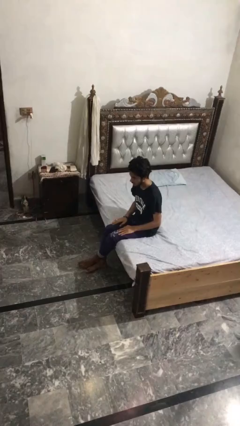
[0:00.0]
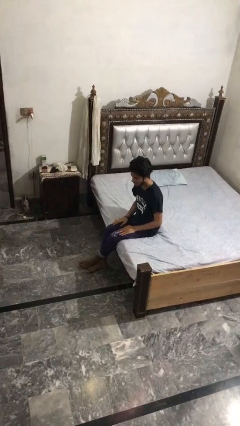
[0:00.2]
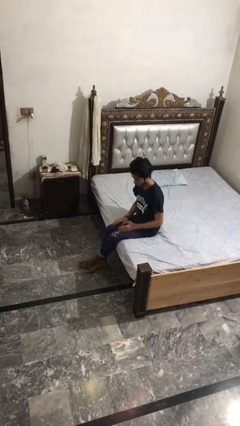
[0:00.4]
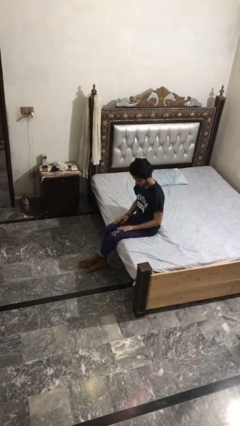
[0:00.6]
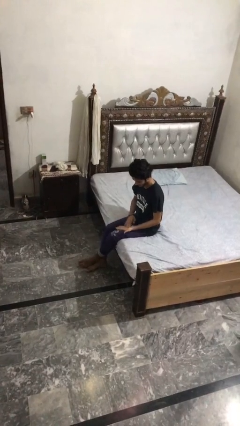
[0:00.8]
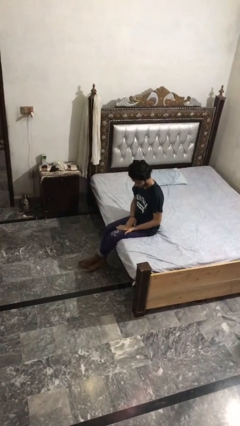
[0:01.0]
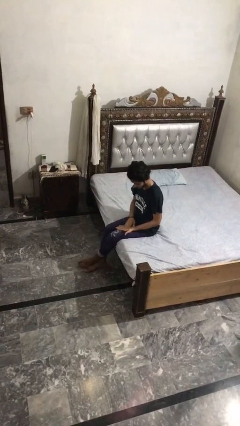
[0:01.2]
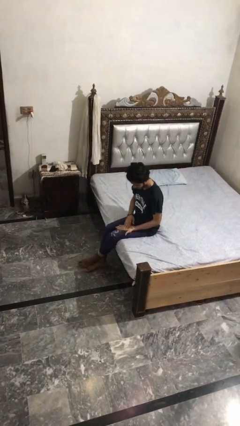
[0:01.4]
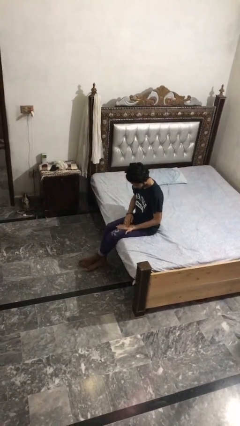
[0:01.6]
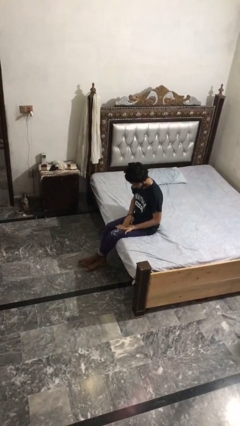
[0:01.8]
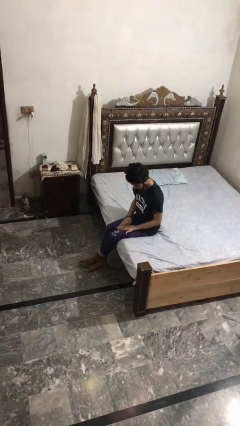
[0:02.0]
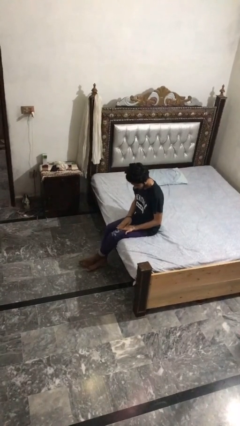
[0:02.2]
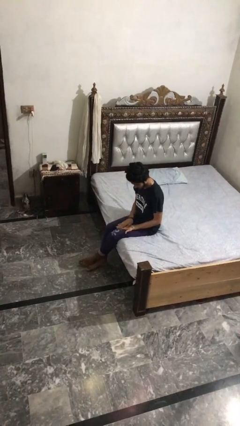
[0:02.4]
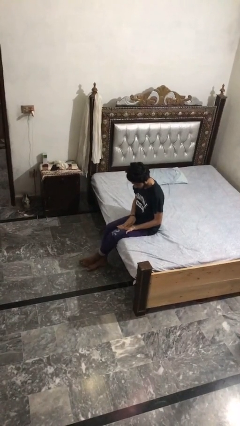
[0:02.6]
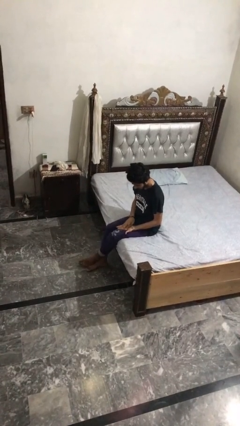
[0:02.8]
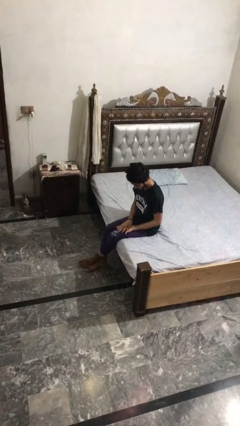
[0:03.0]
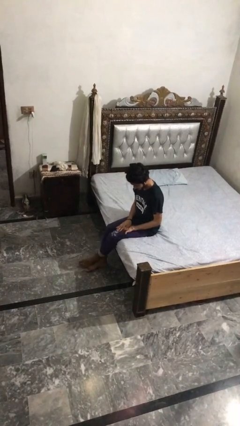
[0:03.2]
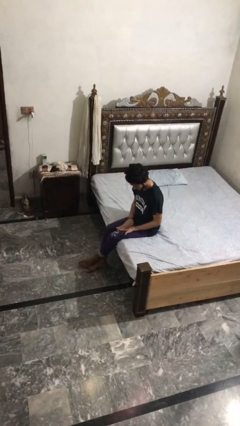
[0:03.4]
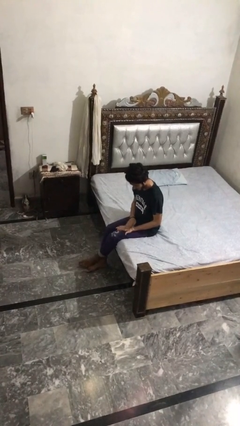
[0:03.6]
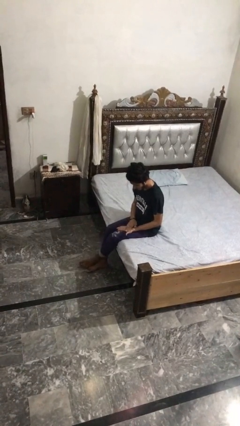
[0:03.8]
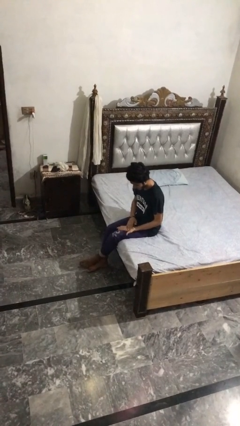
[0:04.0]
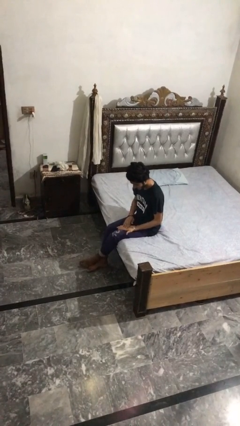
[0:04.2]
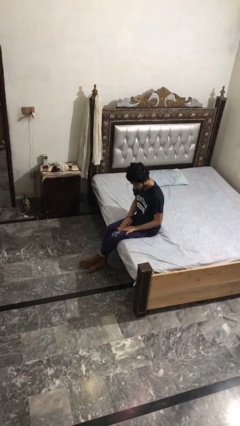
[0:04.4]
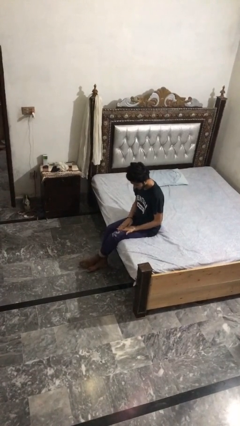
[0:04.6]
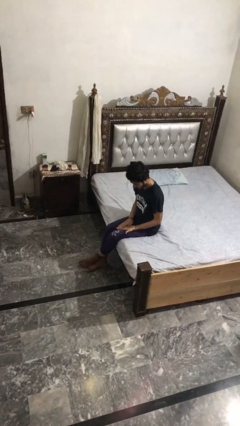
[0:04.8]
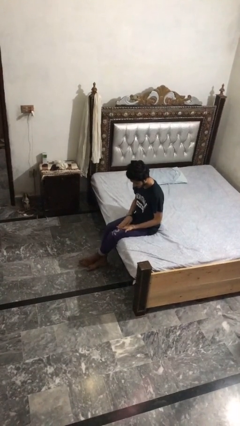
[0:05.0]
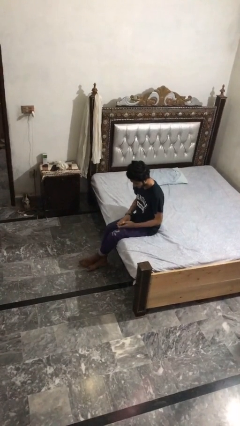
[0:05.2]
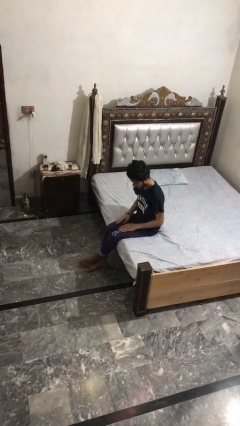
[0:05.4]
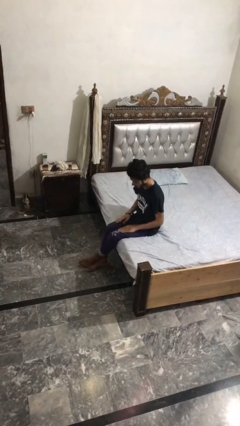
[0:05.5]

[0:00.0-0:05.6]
person looks at hands in lap

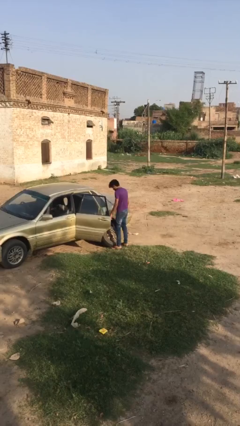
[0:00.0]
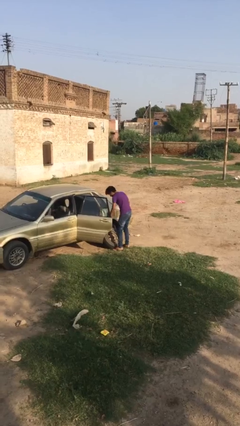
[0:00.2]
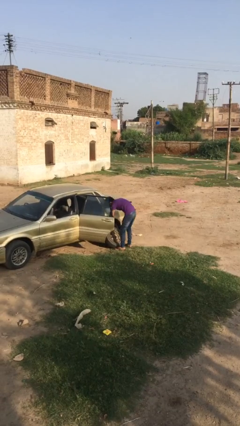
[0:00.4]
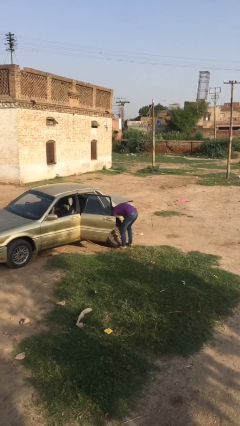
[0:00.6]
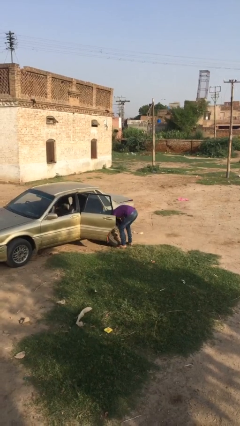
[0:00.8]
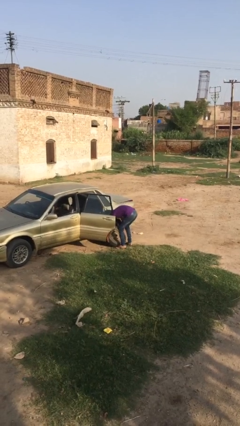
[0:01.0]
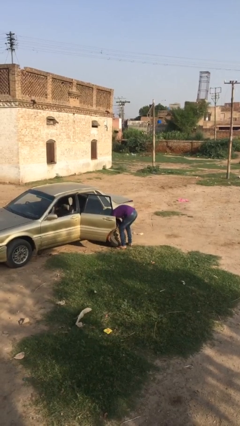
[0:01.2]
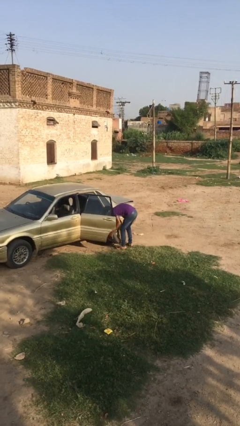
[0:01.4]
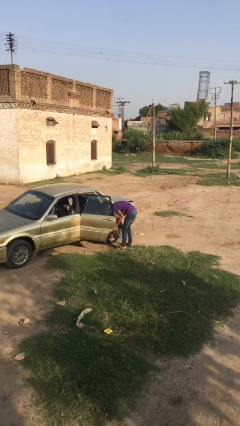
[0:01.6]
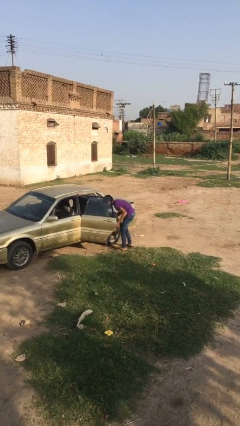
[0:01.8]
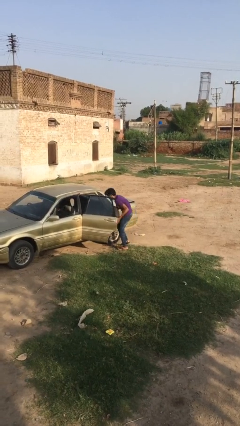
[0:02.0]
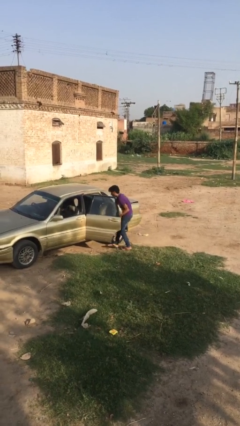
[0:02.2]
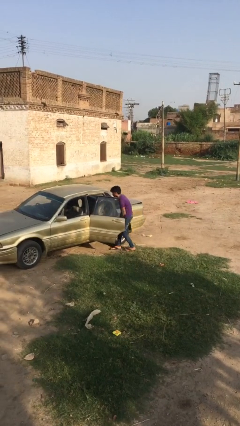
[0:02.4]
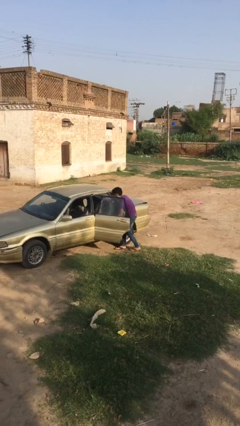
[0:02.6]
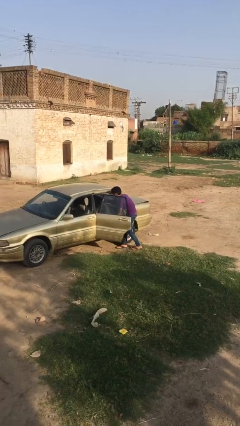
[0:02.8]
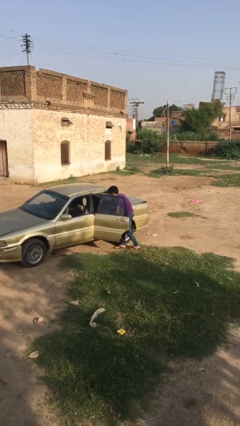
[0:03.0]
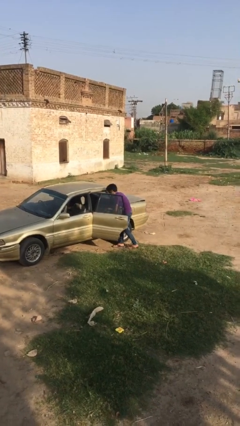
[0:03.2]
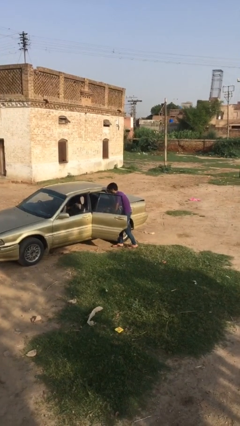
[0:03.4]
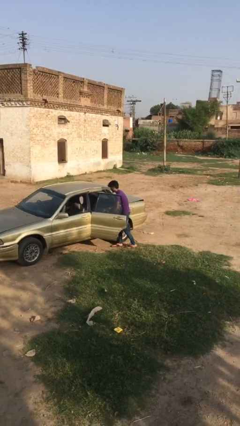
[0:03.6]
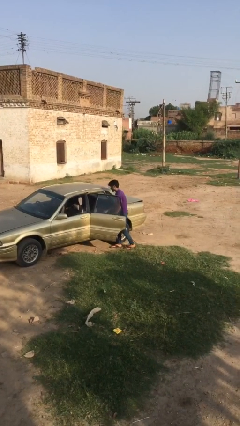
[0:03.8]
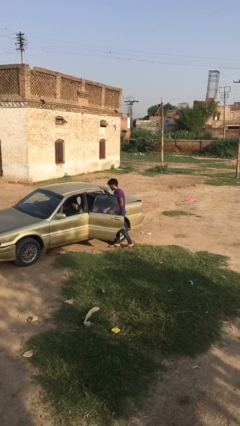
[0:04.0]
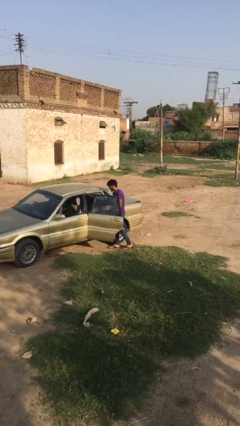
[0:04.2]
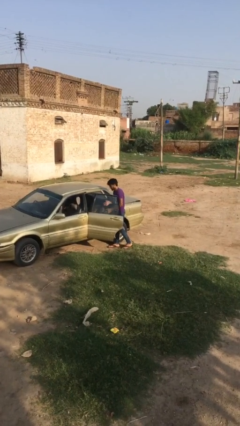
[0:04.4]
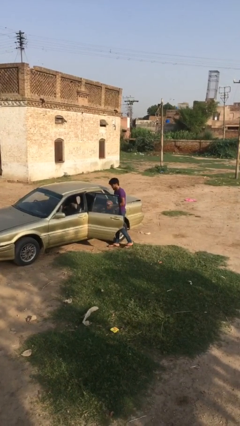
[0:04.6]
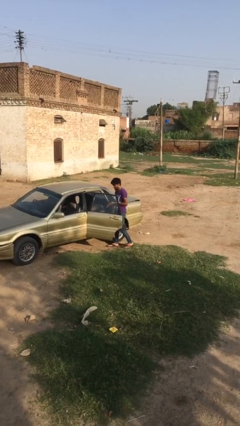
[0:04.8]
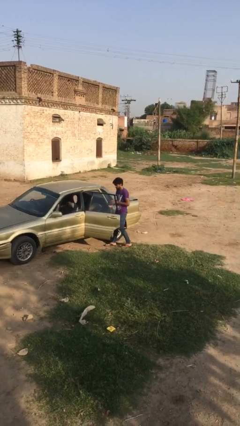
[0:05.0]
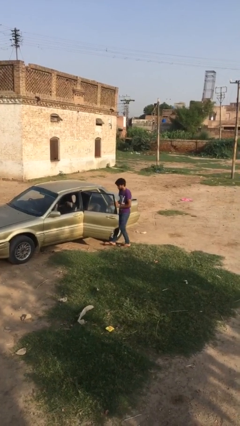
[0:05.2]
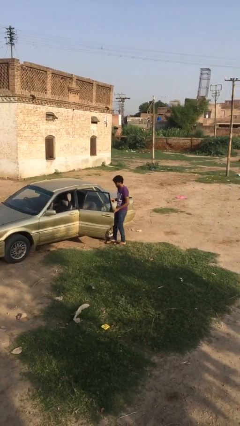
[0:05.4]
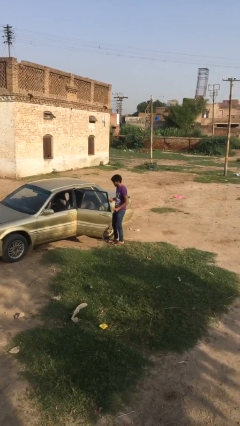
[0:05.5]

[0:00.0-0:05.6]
person loads car

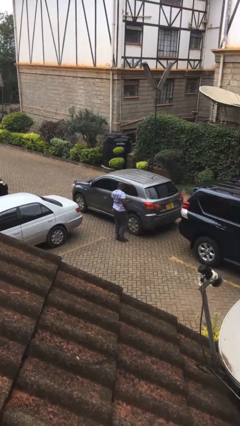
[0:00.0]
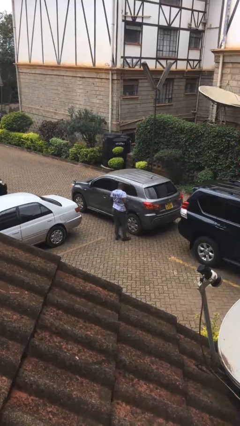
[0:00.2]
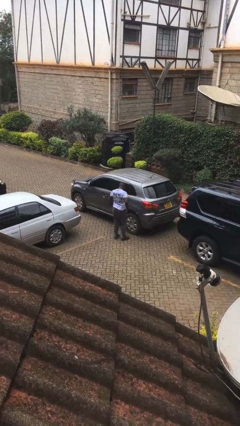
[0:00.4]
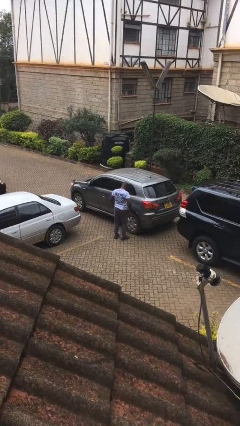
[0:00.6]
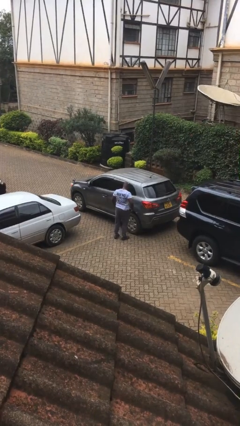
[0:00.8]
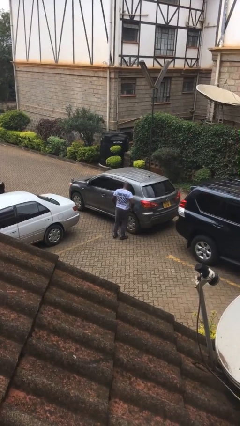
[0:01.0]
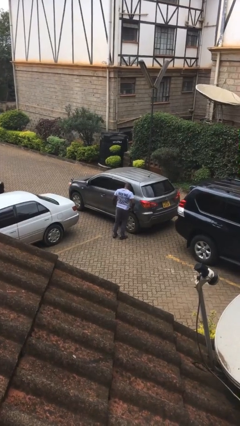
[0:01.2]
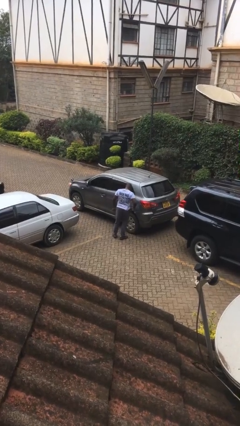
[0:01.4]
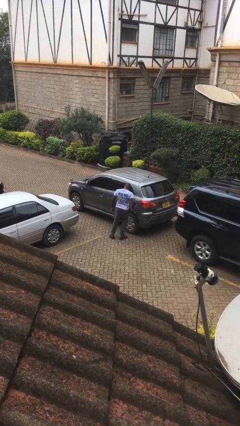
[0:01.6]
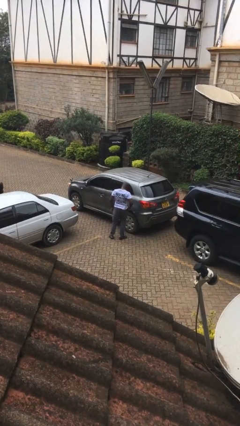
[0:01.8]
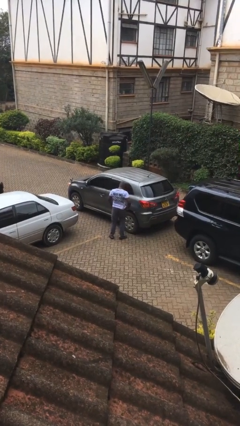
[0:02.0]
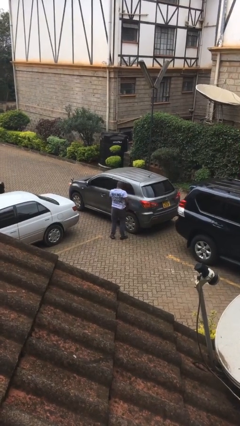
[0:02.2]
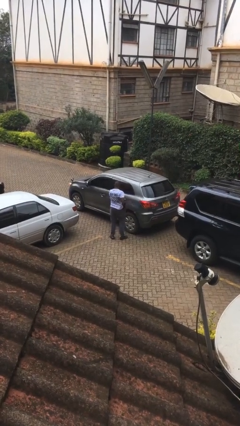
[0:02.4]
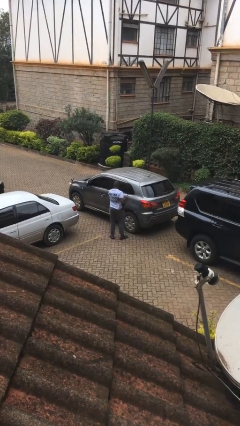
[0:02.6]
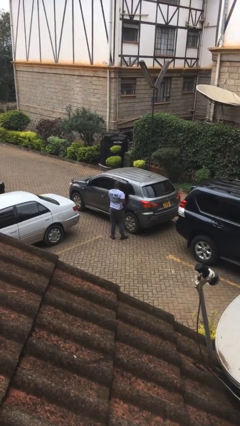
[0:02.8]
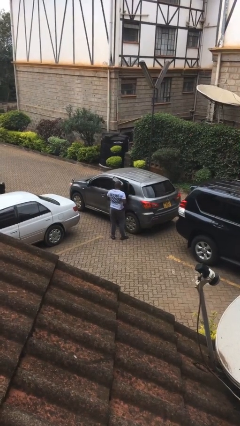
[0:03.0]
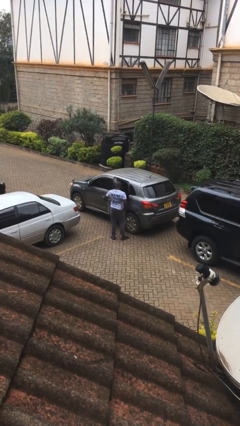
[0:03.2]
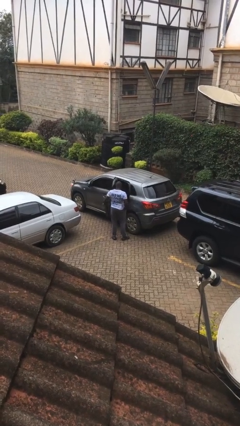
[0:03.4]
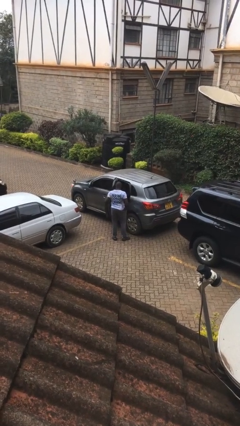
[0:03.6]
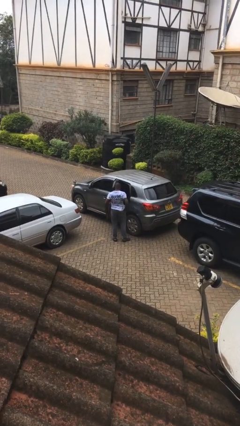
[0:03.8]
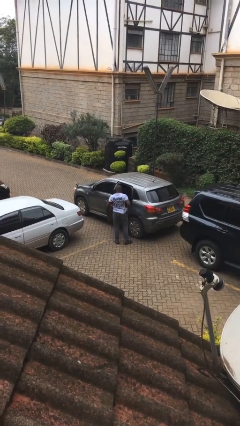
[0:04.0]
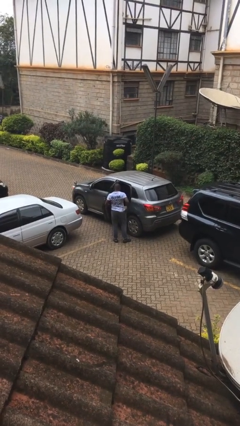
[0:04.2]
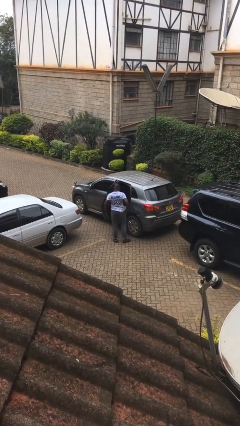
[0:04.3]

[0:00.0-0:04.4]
person opens car door

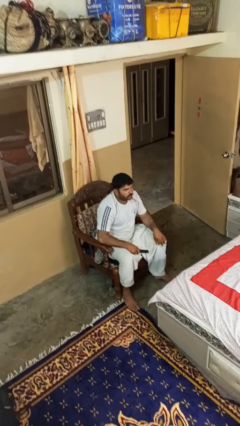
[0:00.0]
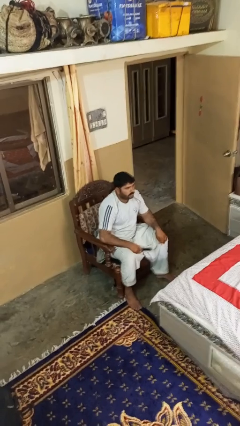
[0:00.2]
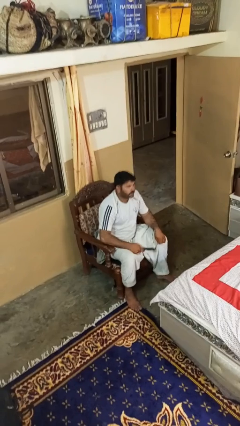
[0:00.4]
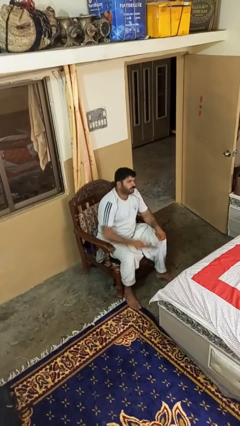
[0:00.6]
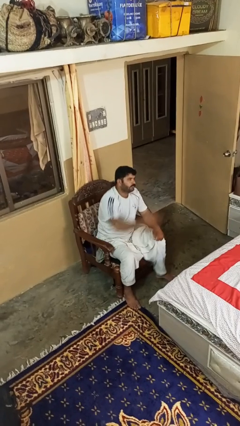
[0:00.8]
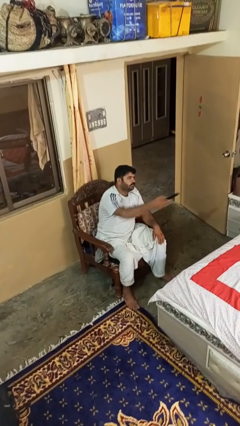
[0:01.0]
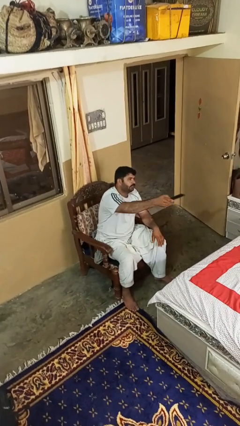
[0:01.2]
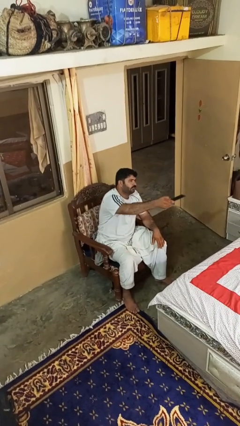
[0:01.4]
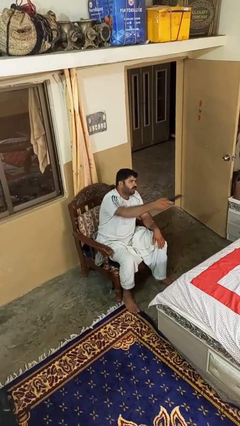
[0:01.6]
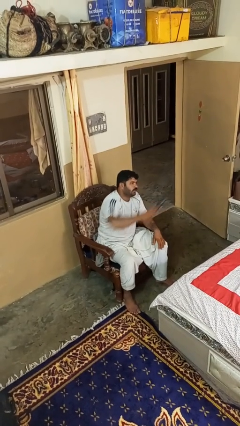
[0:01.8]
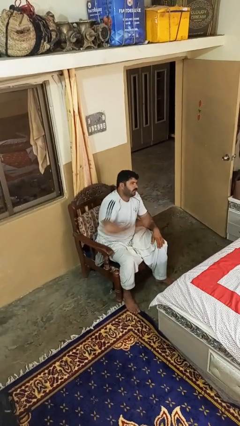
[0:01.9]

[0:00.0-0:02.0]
person uses television remote

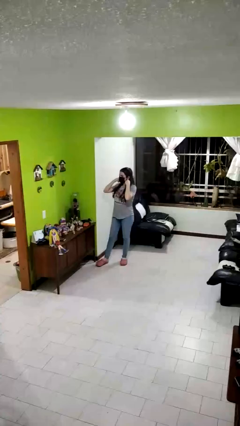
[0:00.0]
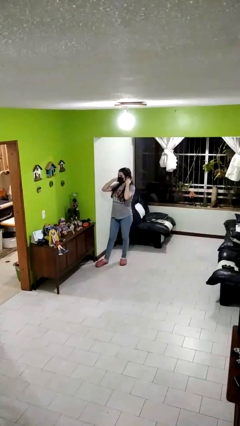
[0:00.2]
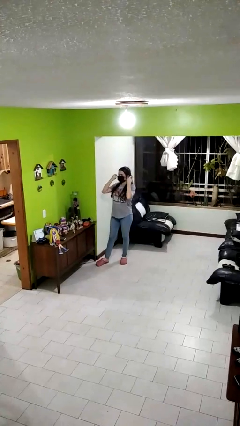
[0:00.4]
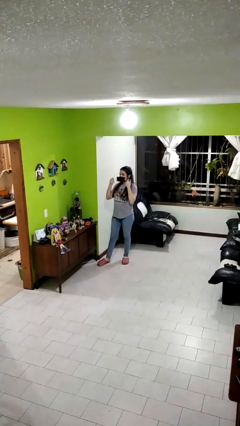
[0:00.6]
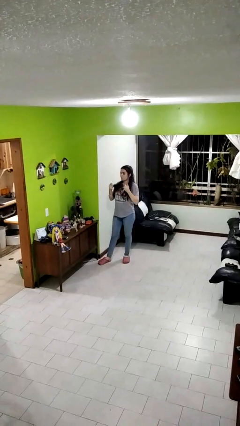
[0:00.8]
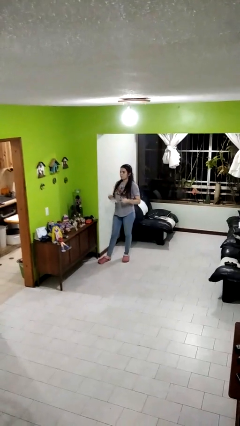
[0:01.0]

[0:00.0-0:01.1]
person takes off facemask
